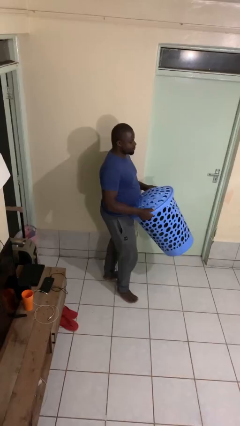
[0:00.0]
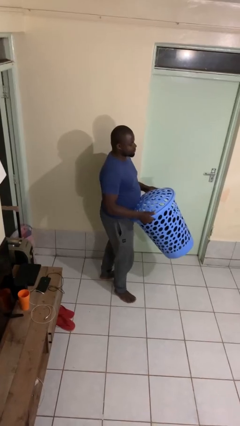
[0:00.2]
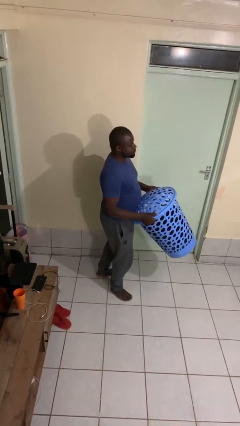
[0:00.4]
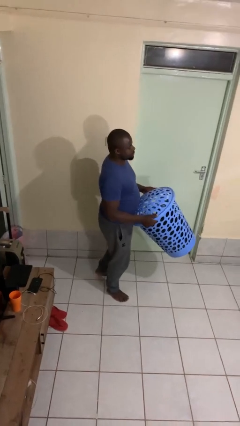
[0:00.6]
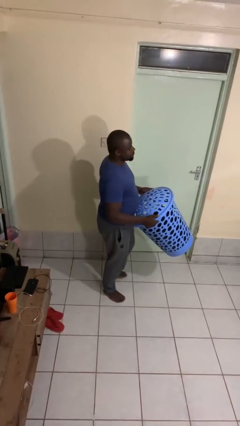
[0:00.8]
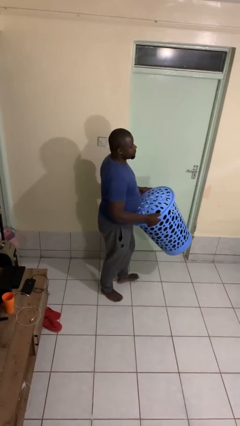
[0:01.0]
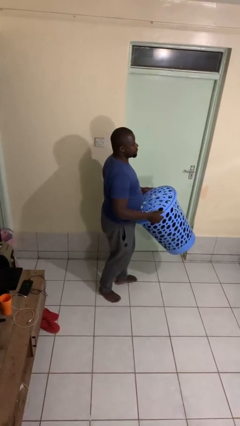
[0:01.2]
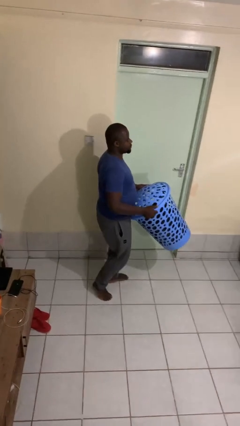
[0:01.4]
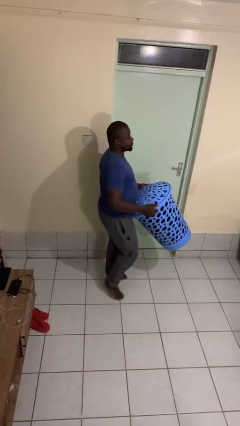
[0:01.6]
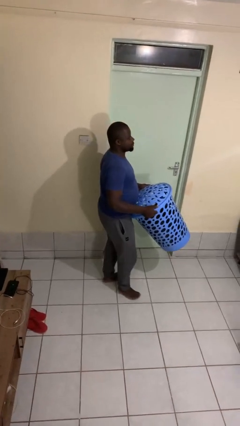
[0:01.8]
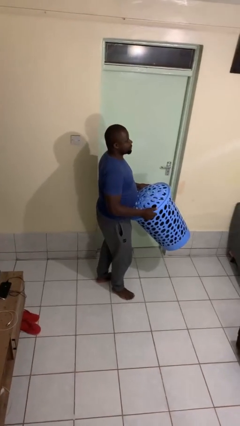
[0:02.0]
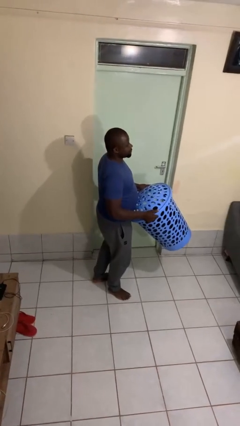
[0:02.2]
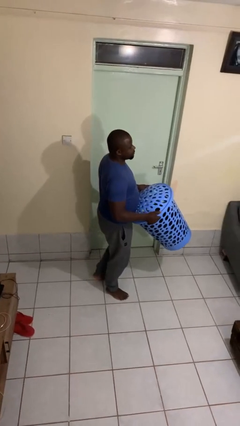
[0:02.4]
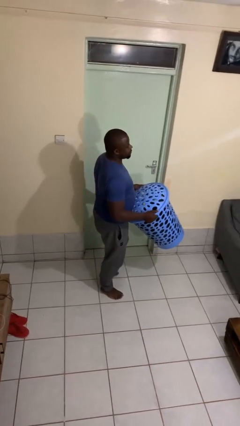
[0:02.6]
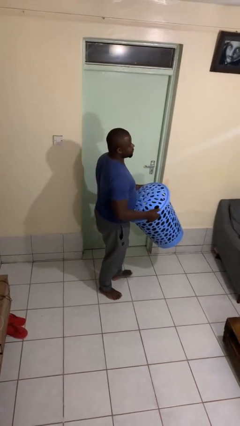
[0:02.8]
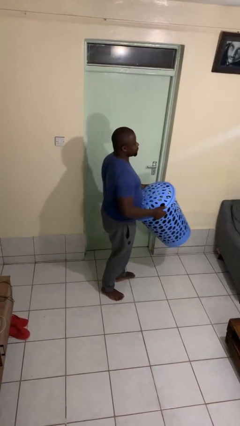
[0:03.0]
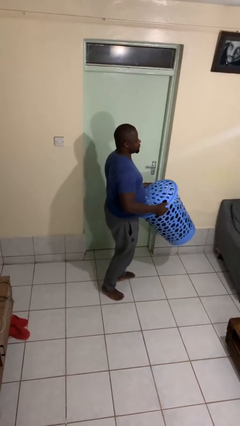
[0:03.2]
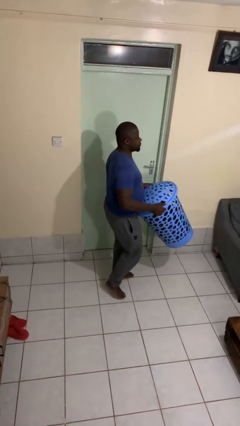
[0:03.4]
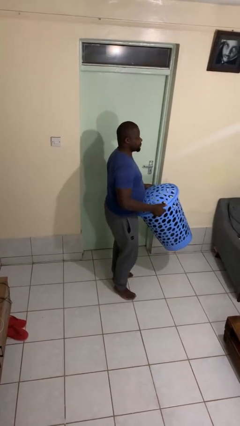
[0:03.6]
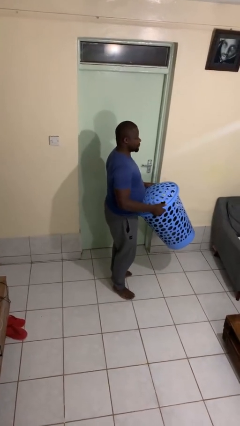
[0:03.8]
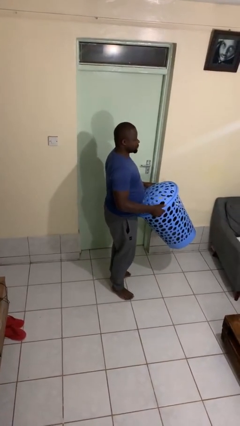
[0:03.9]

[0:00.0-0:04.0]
person carries laundry basket

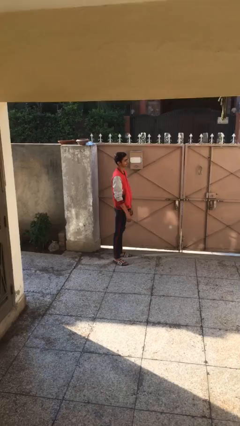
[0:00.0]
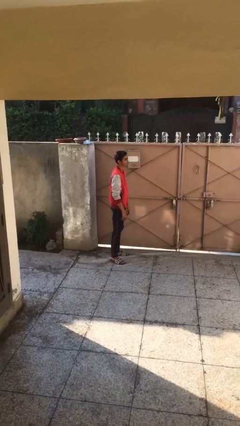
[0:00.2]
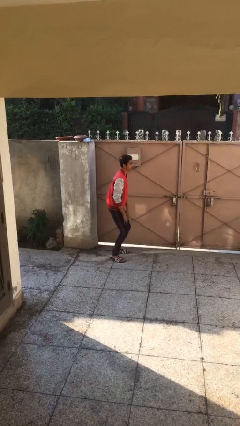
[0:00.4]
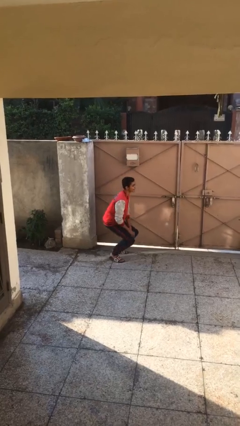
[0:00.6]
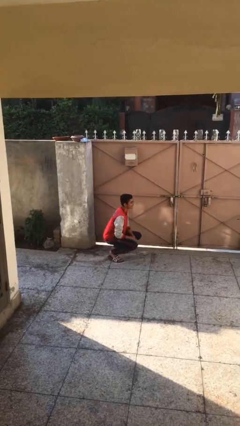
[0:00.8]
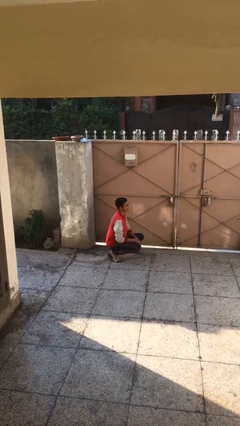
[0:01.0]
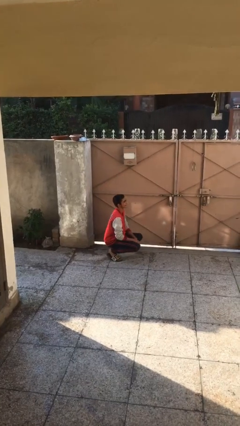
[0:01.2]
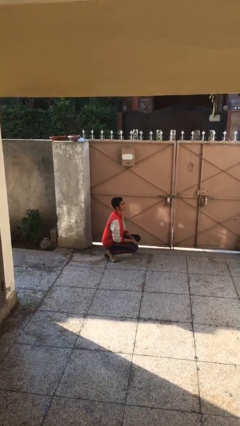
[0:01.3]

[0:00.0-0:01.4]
person sits down

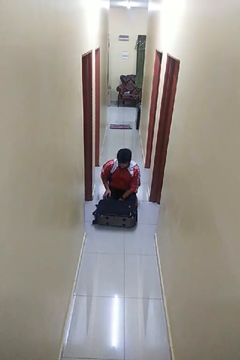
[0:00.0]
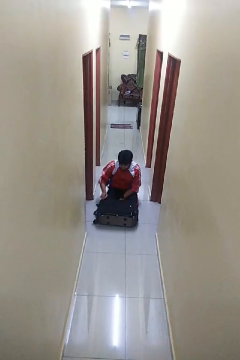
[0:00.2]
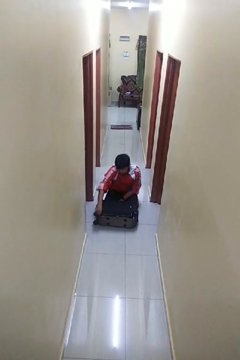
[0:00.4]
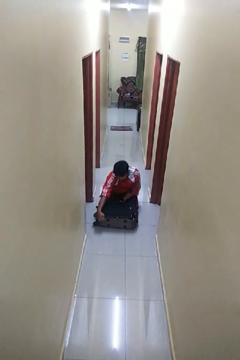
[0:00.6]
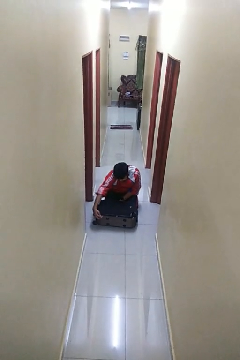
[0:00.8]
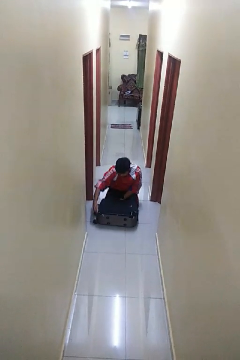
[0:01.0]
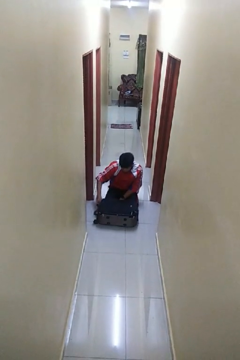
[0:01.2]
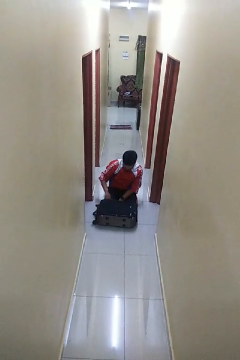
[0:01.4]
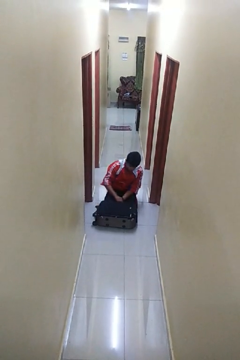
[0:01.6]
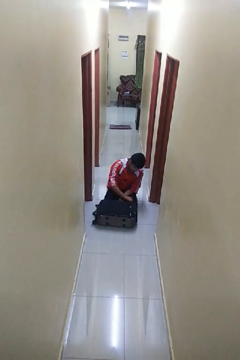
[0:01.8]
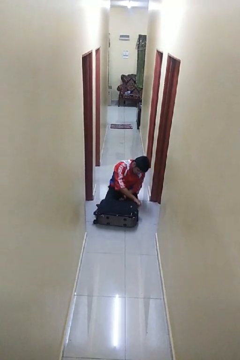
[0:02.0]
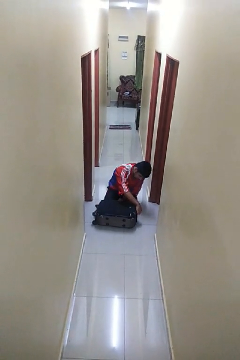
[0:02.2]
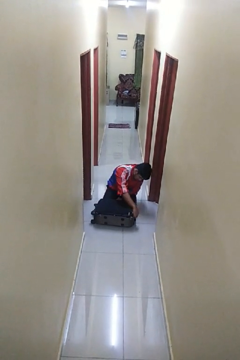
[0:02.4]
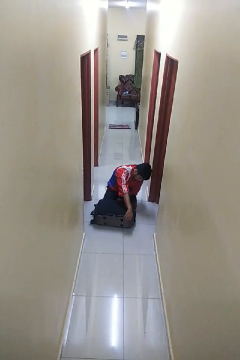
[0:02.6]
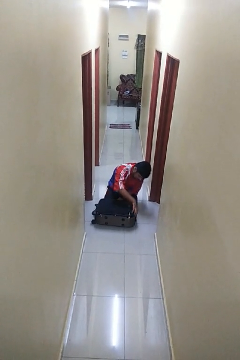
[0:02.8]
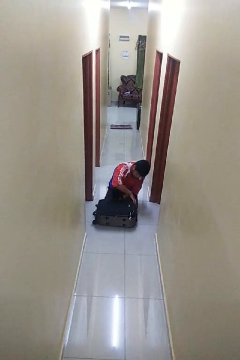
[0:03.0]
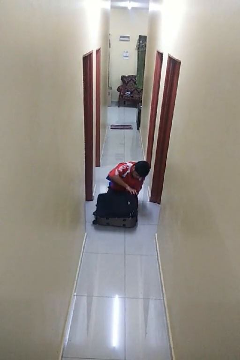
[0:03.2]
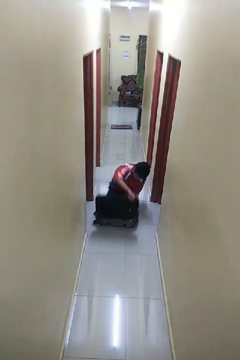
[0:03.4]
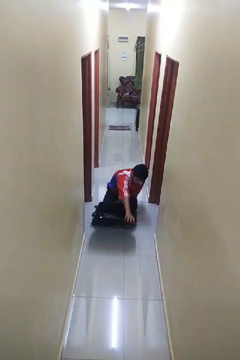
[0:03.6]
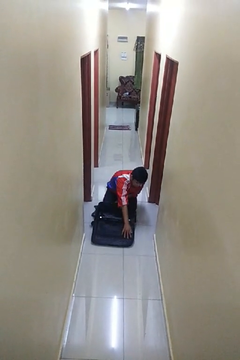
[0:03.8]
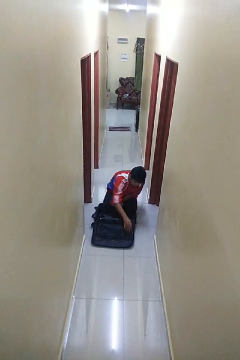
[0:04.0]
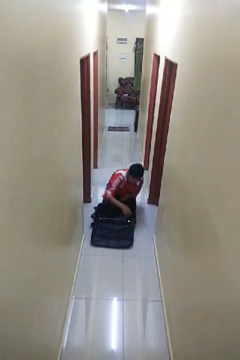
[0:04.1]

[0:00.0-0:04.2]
person opens suitcase

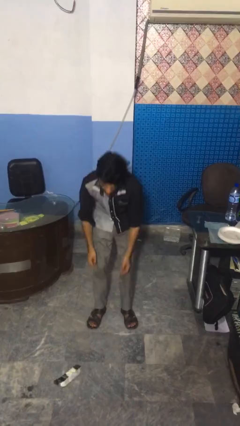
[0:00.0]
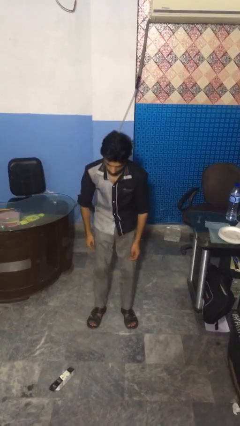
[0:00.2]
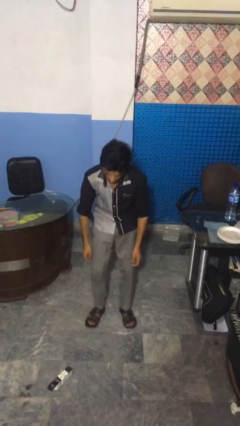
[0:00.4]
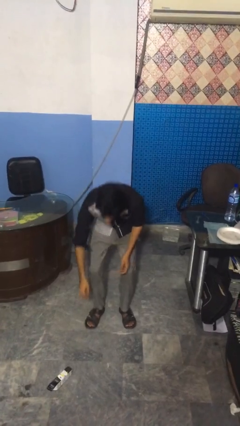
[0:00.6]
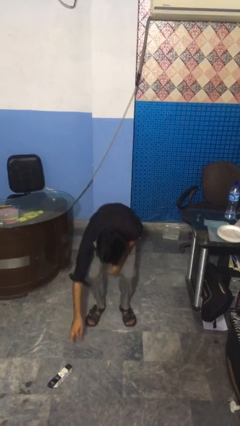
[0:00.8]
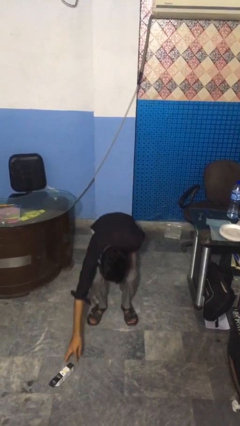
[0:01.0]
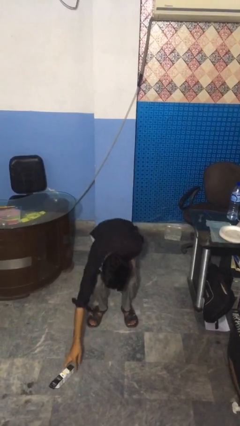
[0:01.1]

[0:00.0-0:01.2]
person catches dropped object

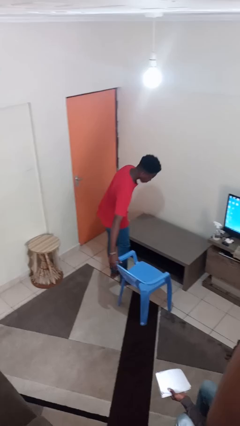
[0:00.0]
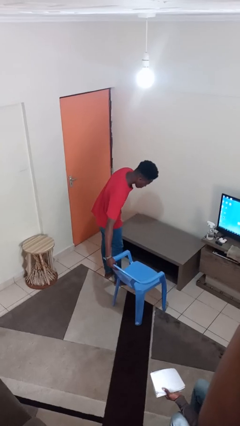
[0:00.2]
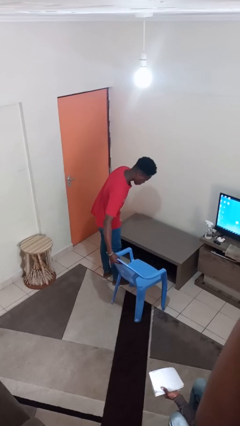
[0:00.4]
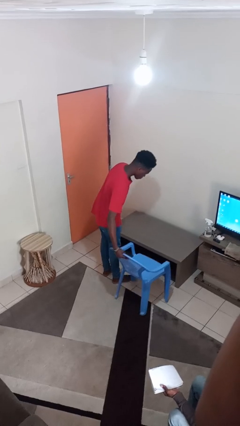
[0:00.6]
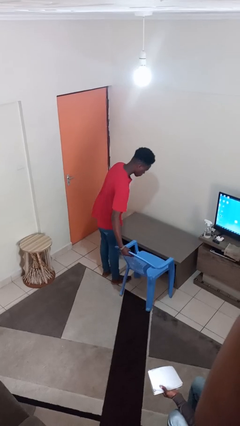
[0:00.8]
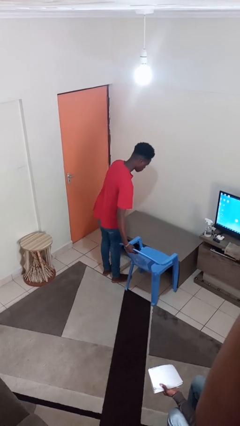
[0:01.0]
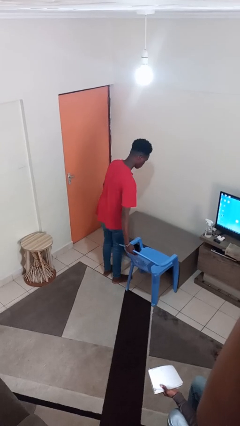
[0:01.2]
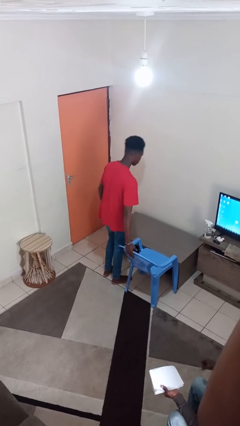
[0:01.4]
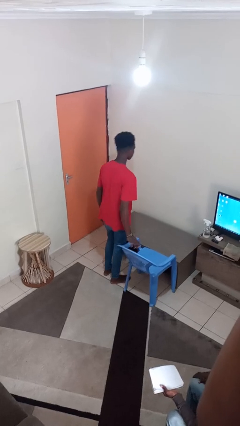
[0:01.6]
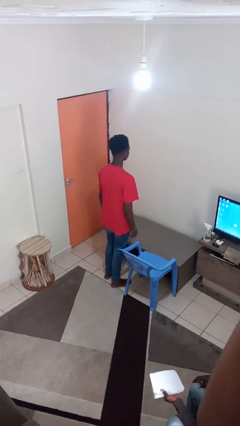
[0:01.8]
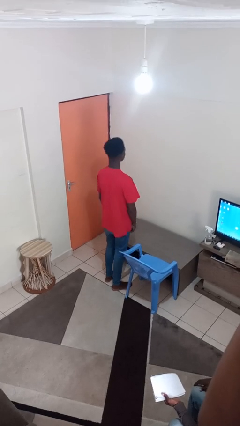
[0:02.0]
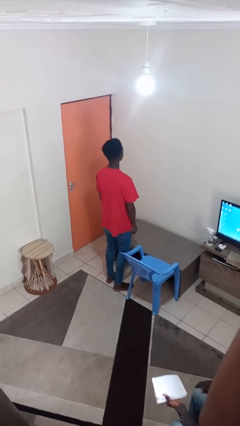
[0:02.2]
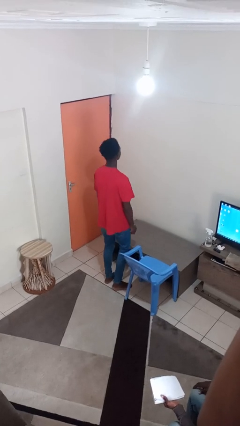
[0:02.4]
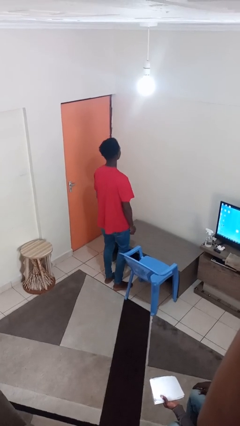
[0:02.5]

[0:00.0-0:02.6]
person pushes in chair

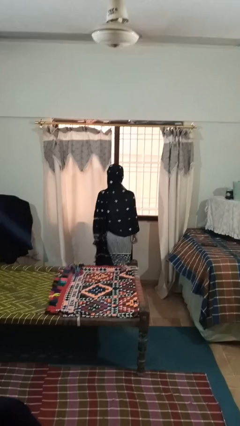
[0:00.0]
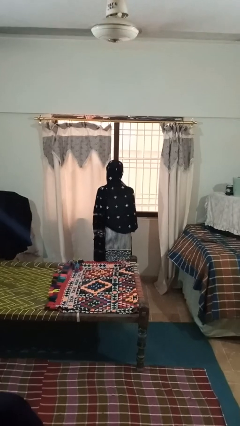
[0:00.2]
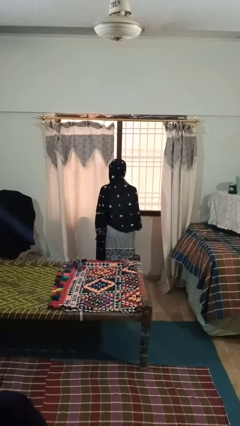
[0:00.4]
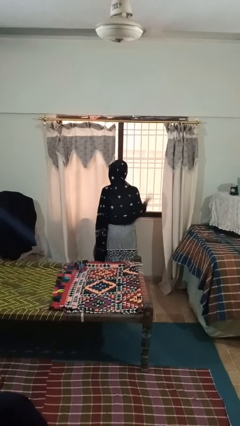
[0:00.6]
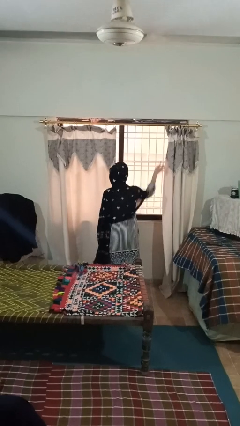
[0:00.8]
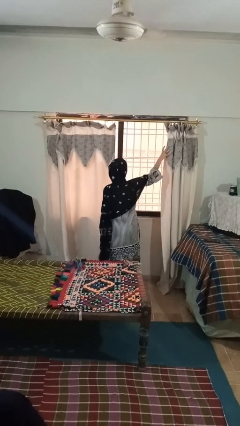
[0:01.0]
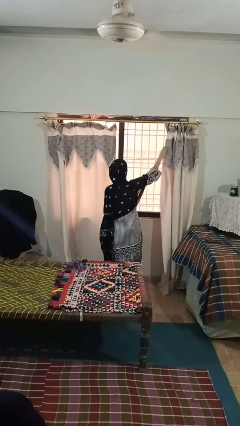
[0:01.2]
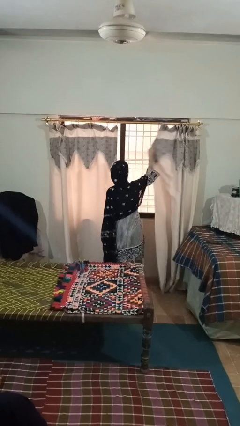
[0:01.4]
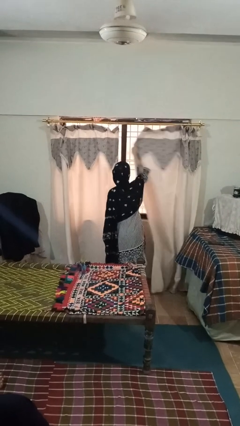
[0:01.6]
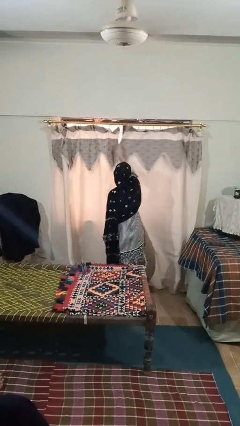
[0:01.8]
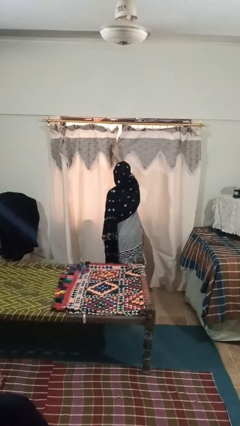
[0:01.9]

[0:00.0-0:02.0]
person closes curtains

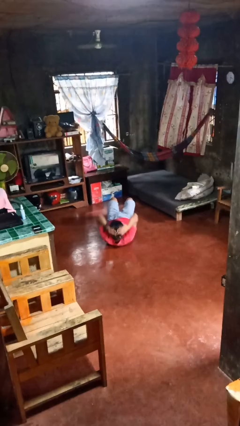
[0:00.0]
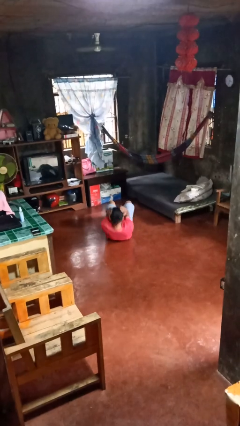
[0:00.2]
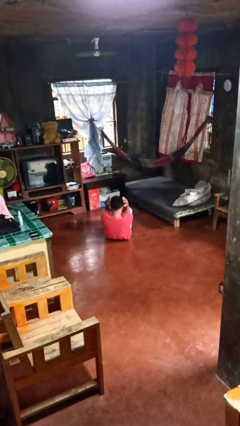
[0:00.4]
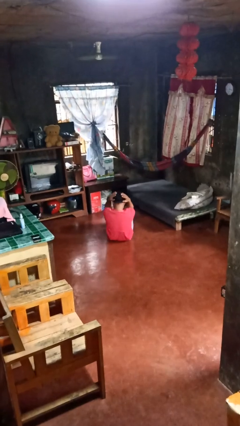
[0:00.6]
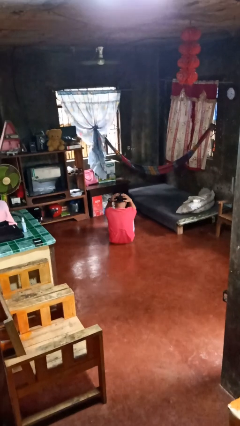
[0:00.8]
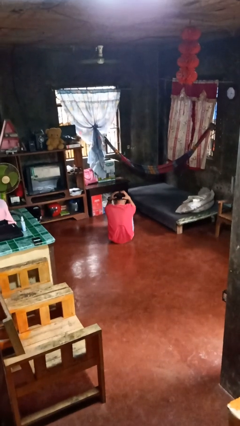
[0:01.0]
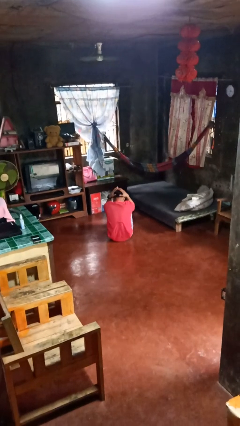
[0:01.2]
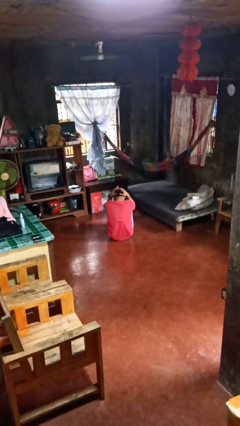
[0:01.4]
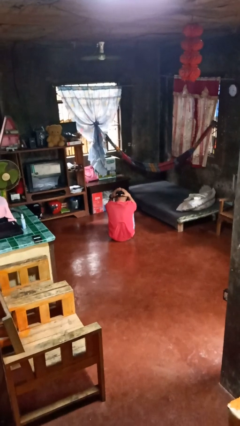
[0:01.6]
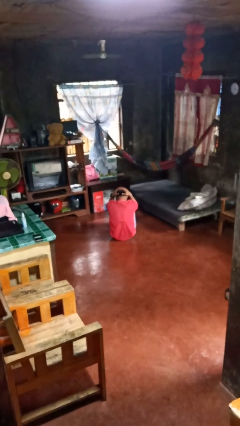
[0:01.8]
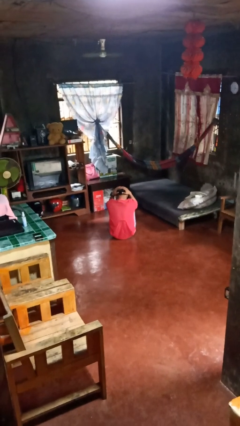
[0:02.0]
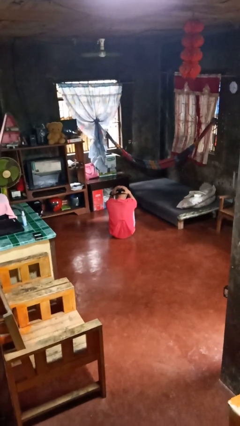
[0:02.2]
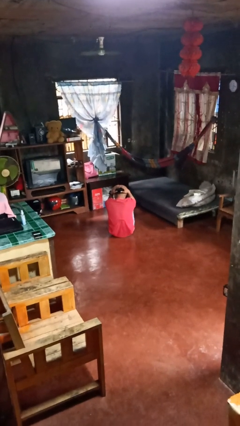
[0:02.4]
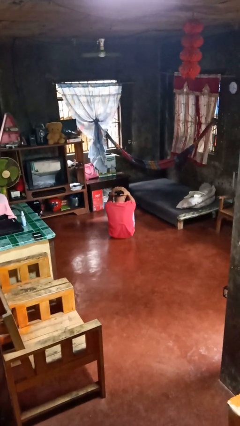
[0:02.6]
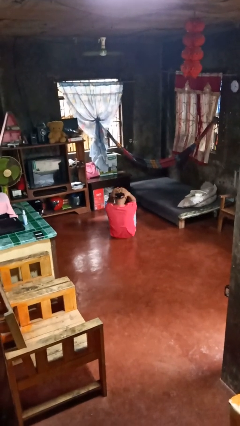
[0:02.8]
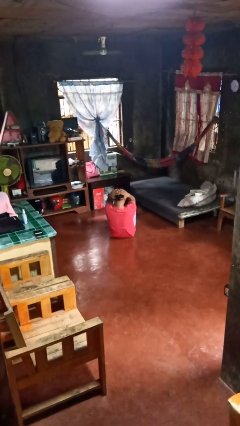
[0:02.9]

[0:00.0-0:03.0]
person exercises with situp
